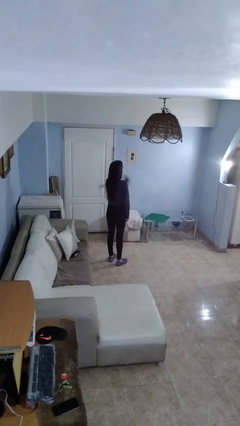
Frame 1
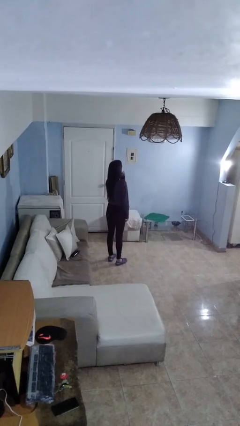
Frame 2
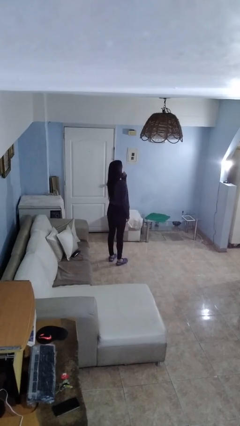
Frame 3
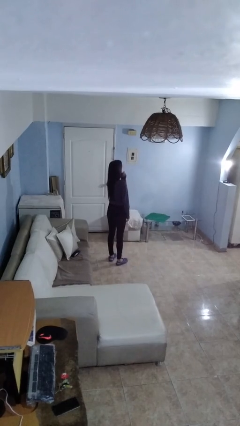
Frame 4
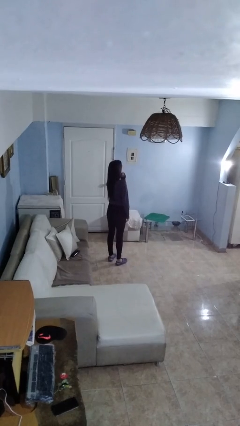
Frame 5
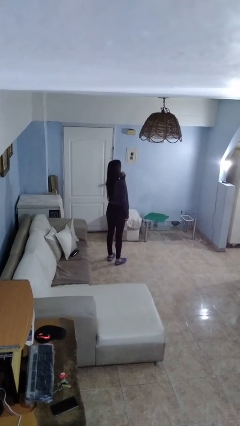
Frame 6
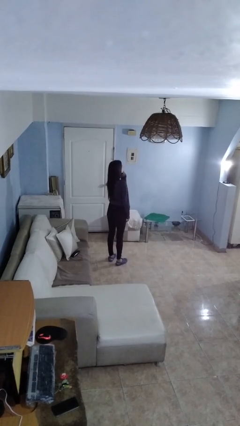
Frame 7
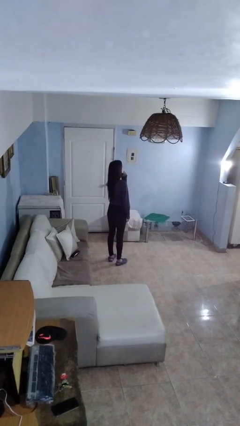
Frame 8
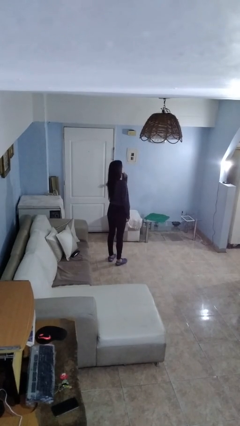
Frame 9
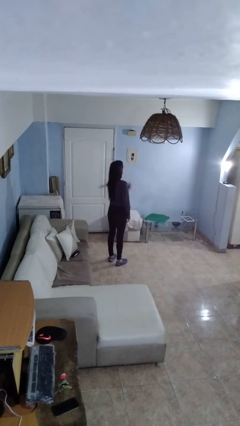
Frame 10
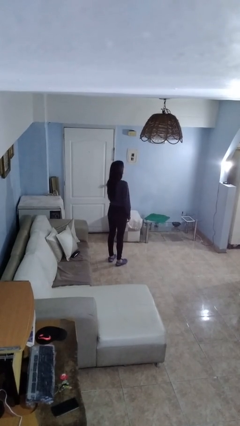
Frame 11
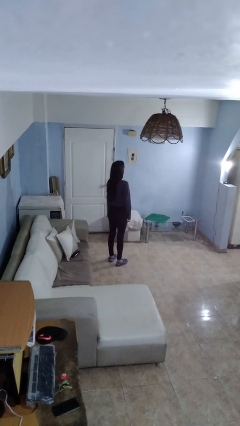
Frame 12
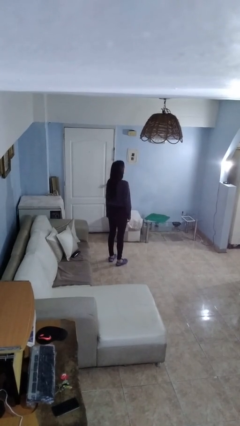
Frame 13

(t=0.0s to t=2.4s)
person strokes chin

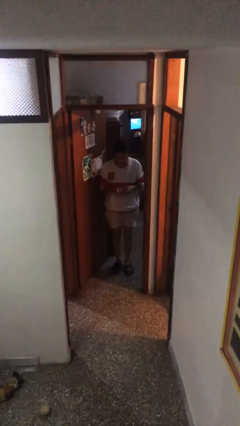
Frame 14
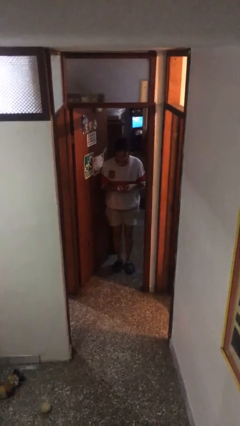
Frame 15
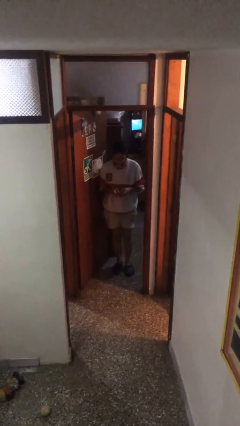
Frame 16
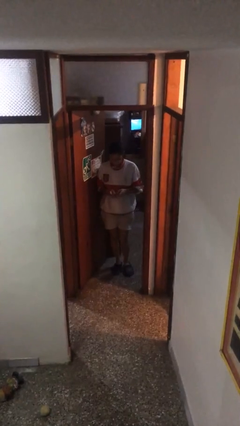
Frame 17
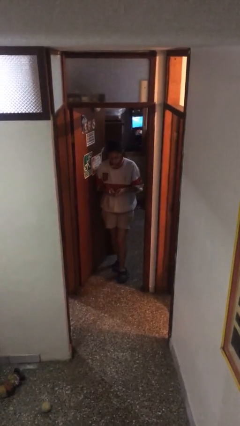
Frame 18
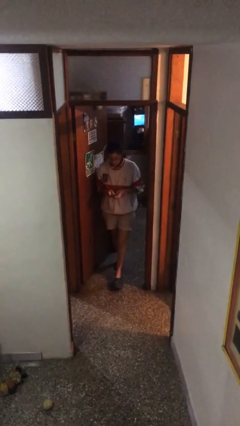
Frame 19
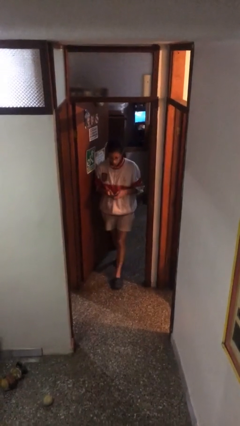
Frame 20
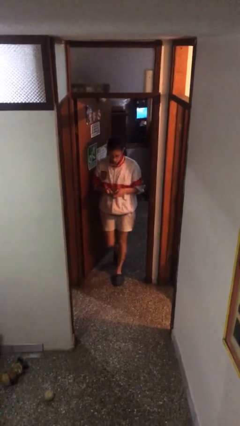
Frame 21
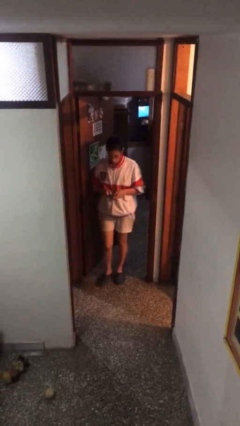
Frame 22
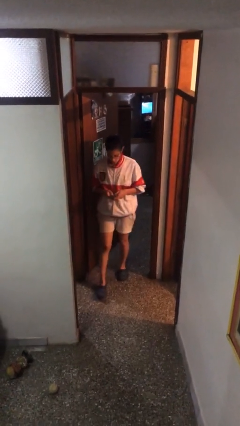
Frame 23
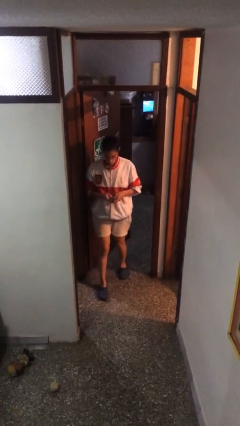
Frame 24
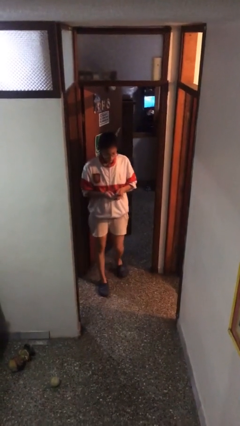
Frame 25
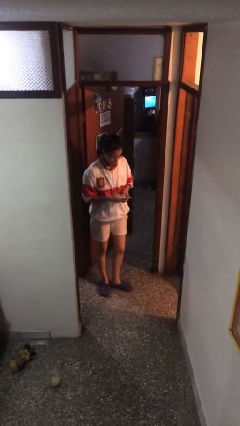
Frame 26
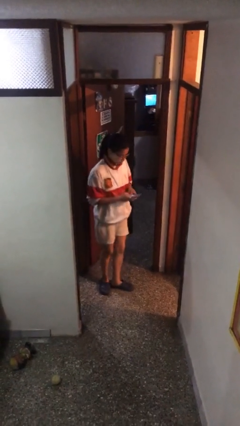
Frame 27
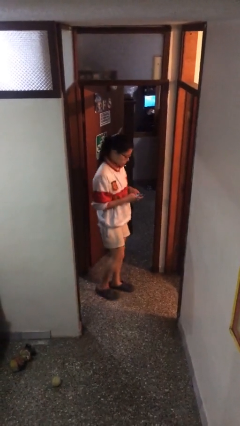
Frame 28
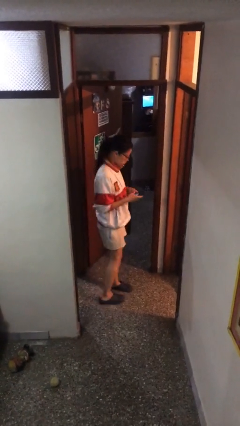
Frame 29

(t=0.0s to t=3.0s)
person enters scene through structure

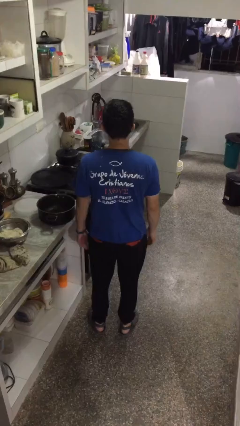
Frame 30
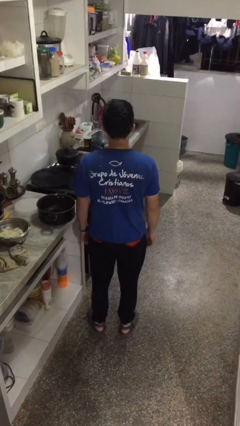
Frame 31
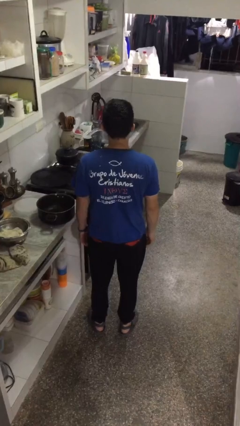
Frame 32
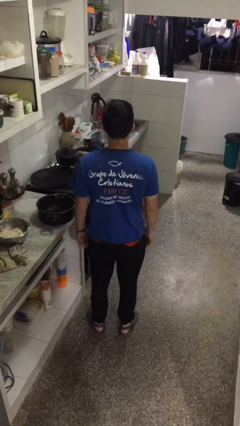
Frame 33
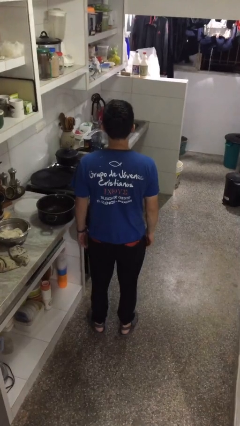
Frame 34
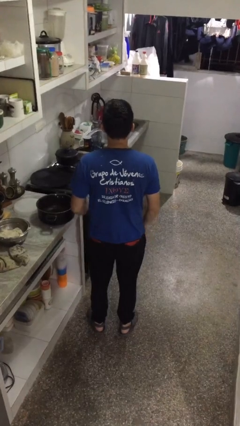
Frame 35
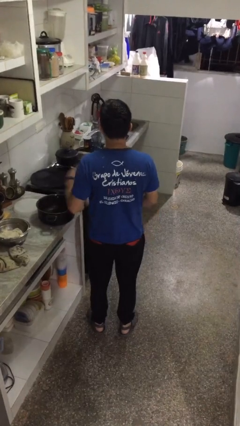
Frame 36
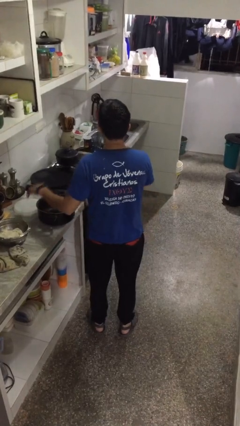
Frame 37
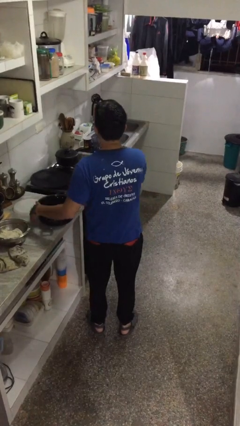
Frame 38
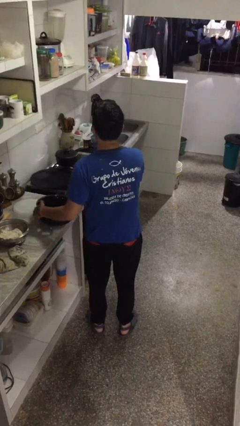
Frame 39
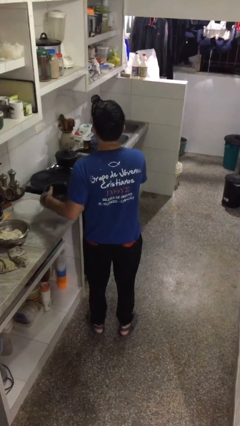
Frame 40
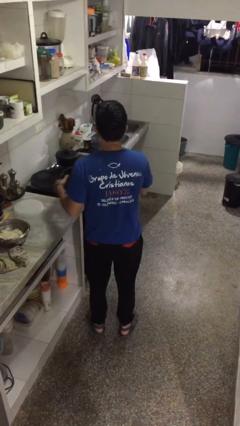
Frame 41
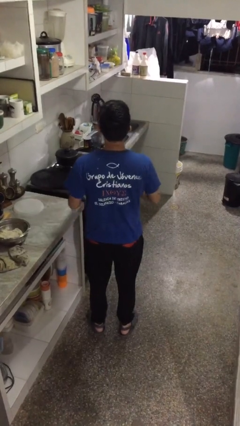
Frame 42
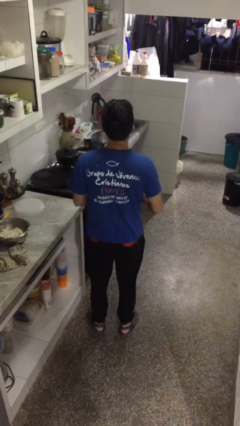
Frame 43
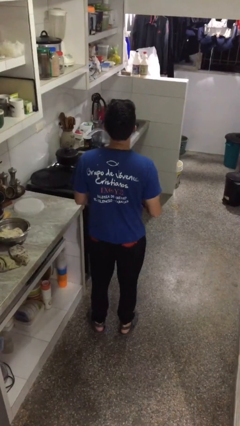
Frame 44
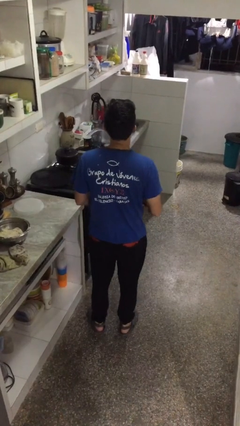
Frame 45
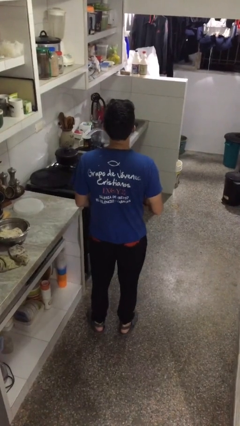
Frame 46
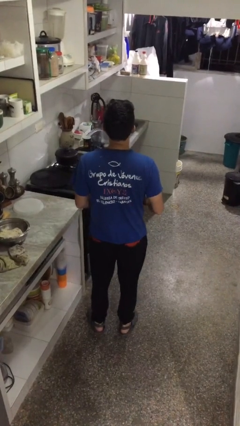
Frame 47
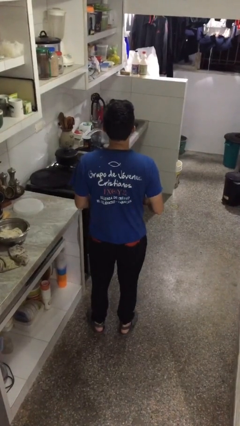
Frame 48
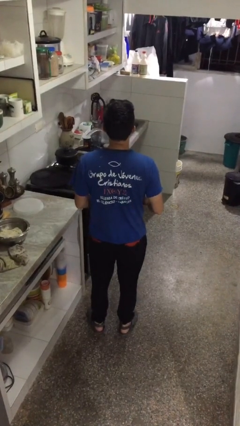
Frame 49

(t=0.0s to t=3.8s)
person picks up object from countertop

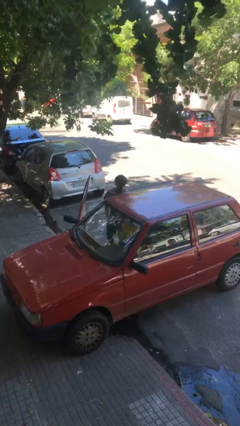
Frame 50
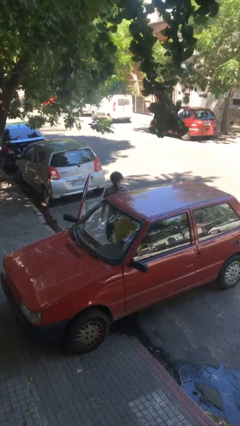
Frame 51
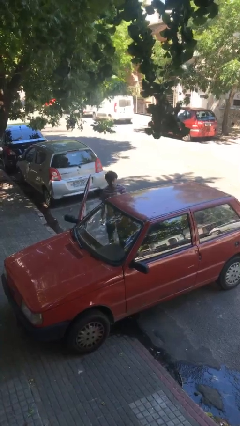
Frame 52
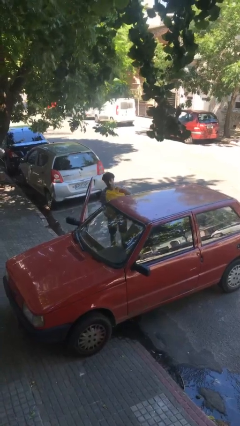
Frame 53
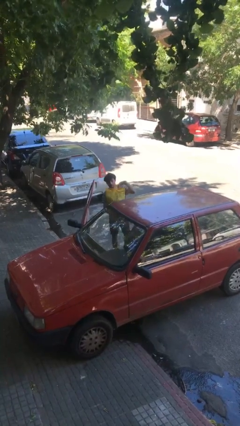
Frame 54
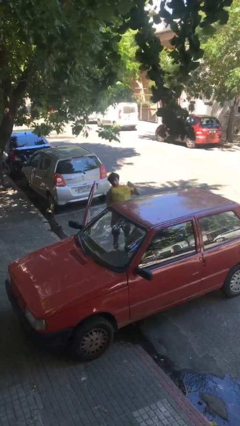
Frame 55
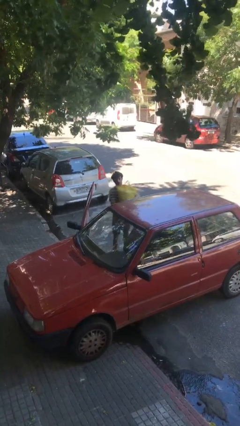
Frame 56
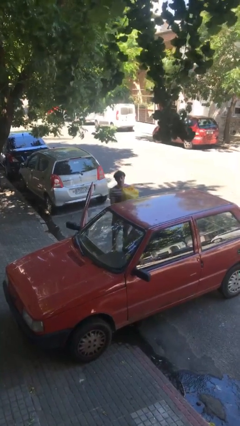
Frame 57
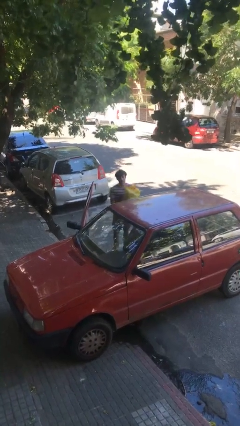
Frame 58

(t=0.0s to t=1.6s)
person unloads car

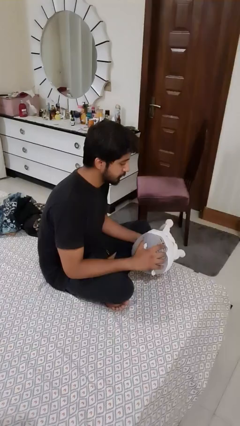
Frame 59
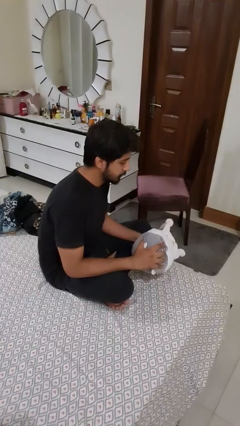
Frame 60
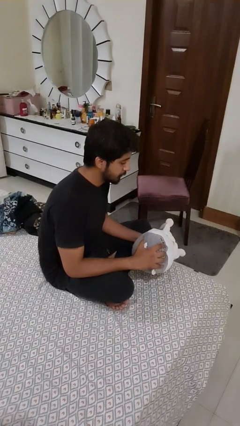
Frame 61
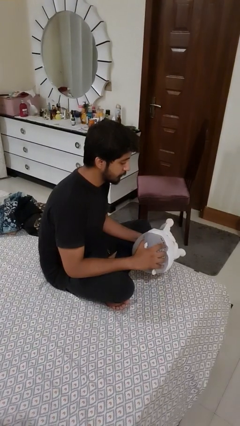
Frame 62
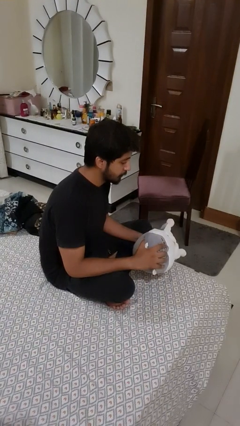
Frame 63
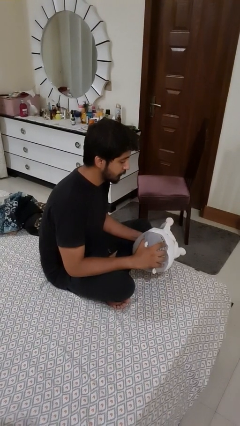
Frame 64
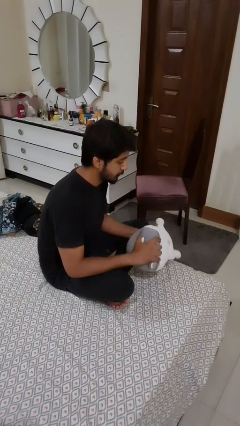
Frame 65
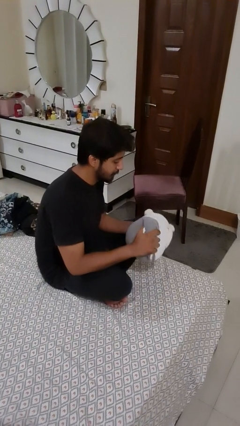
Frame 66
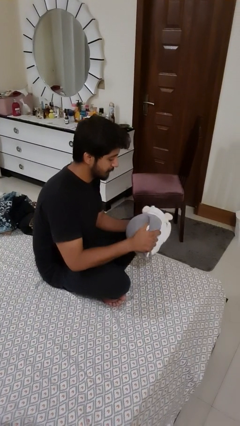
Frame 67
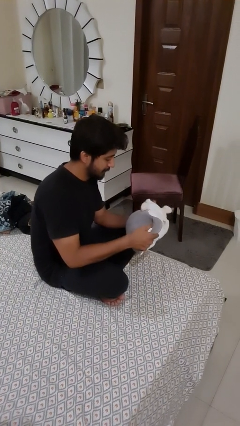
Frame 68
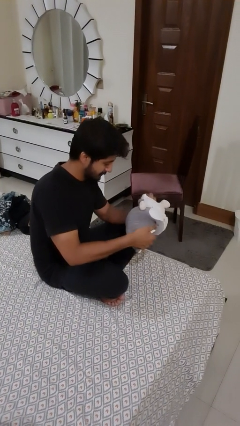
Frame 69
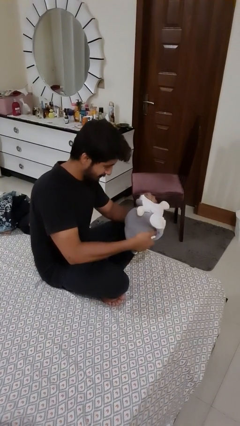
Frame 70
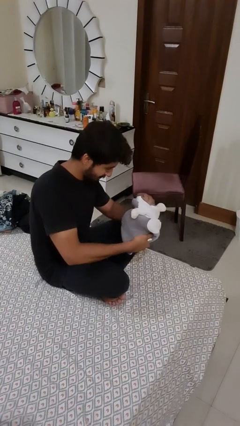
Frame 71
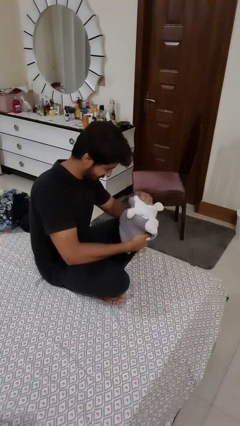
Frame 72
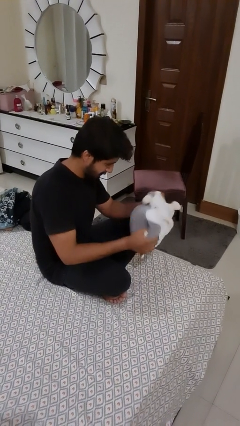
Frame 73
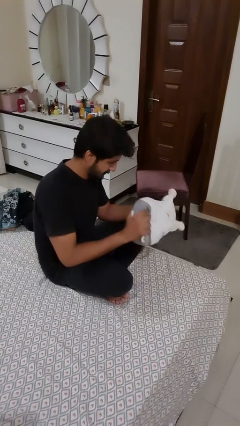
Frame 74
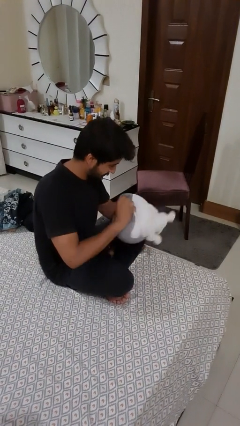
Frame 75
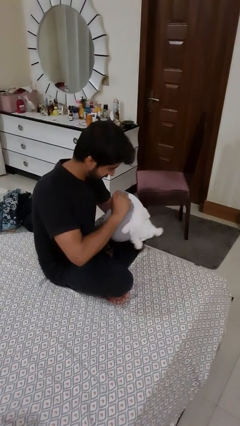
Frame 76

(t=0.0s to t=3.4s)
person squeezes object

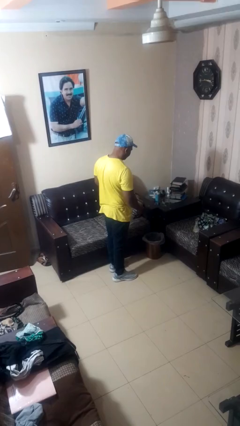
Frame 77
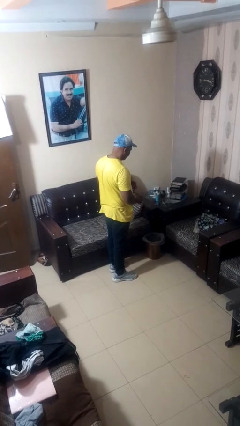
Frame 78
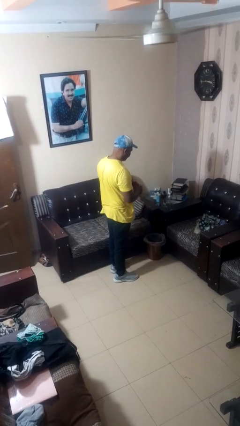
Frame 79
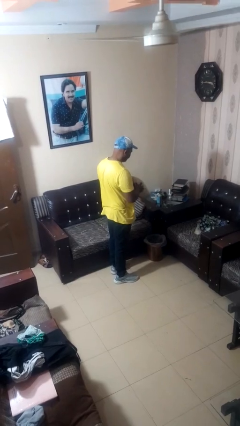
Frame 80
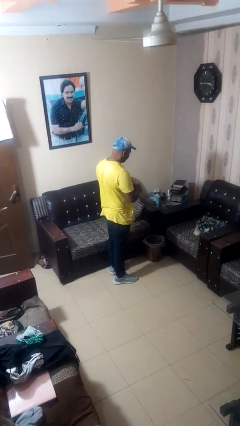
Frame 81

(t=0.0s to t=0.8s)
person discards trash

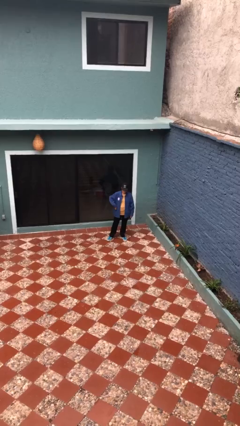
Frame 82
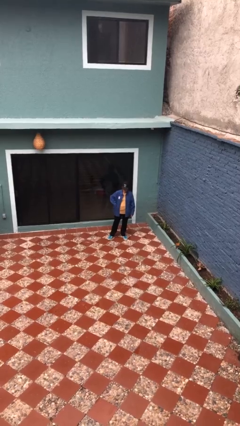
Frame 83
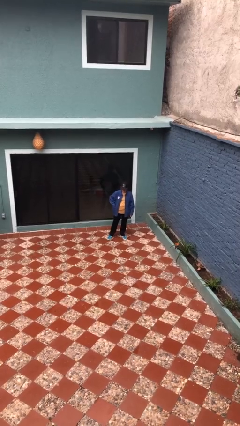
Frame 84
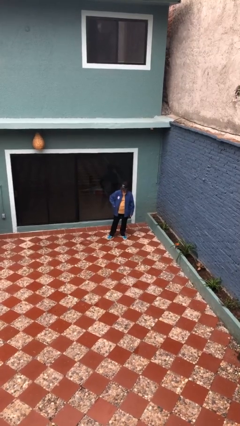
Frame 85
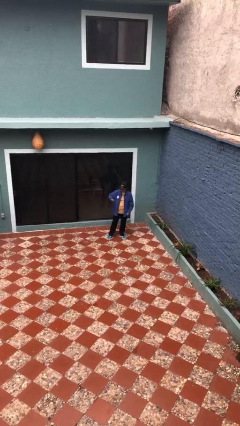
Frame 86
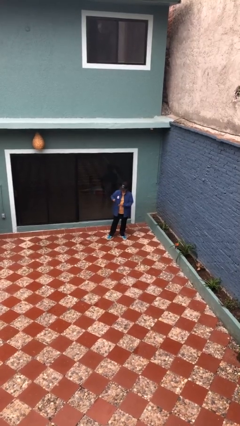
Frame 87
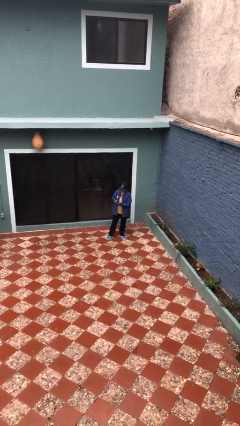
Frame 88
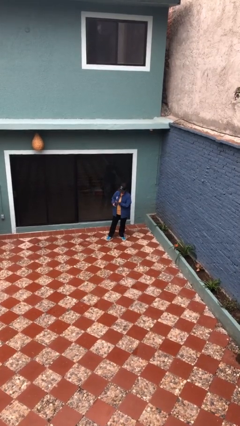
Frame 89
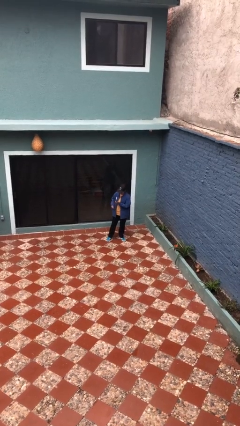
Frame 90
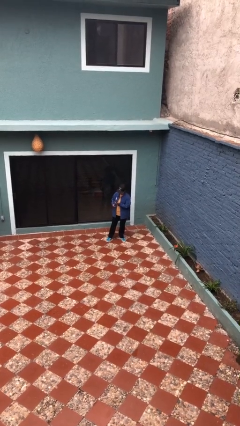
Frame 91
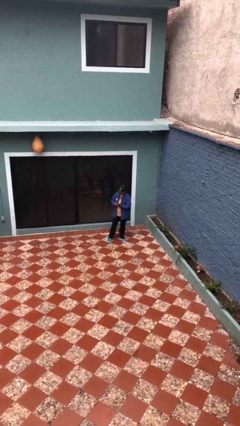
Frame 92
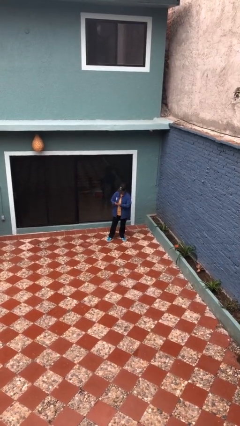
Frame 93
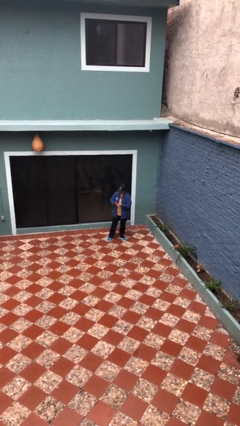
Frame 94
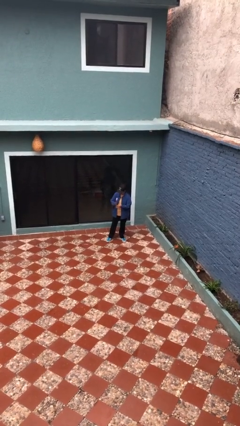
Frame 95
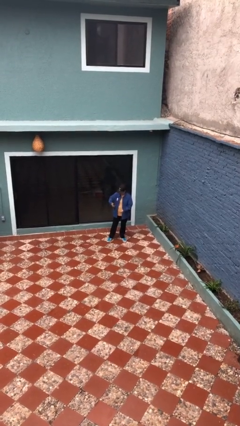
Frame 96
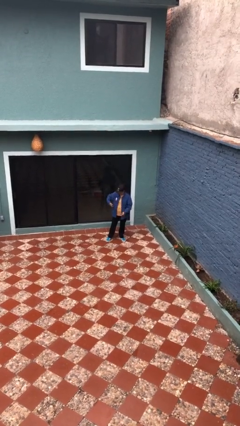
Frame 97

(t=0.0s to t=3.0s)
person takes phone from pocket
